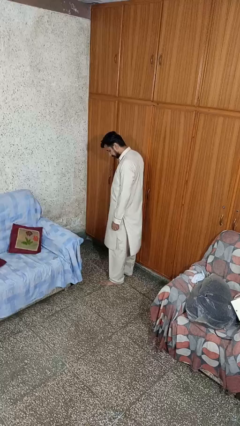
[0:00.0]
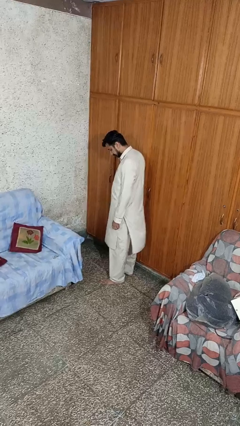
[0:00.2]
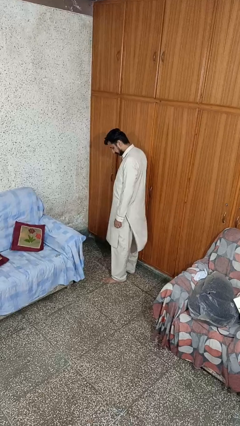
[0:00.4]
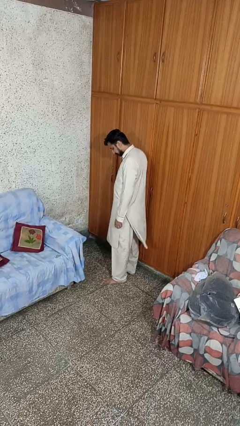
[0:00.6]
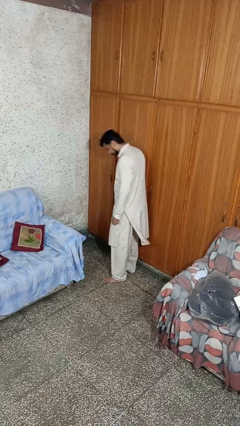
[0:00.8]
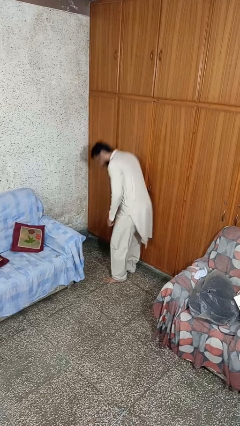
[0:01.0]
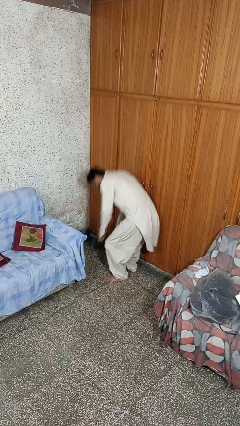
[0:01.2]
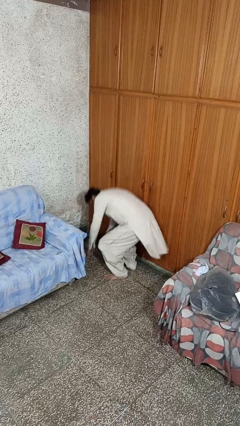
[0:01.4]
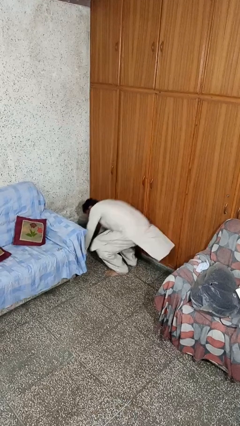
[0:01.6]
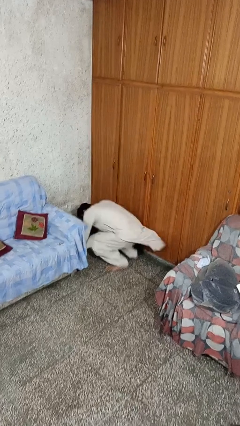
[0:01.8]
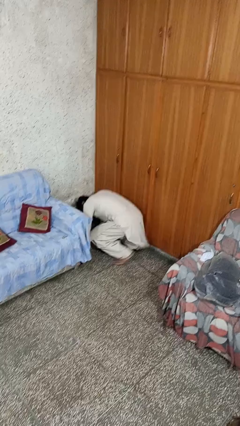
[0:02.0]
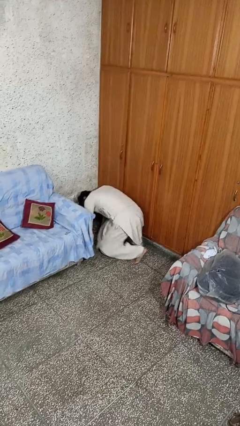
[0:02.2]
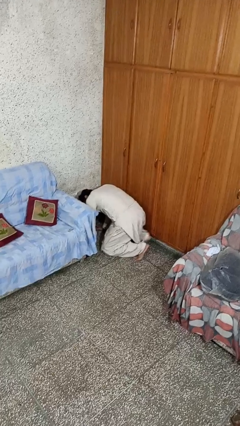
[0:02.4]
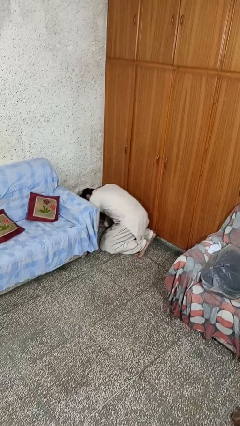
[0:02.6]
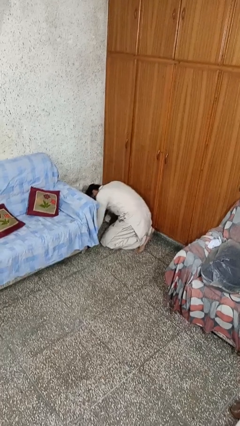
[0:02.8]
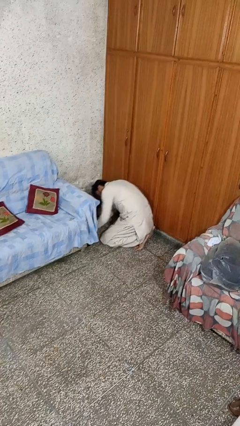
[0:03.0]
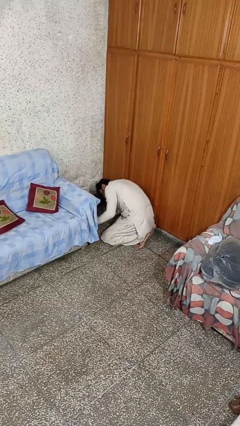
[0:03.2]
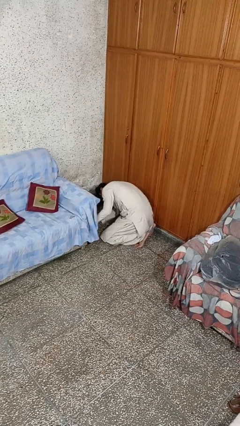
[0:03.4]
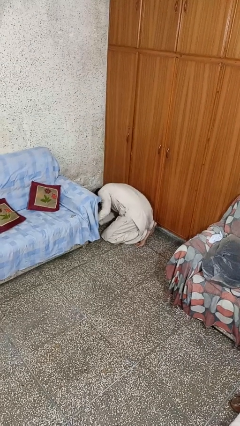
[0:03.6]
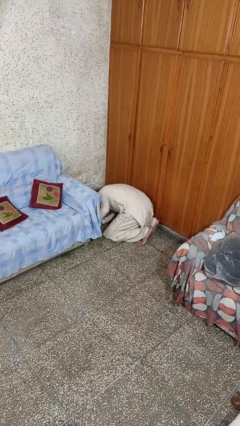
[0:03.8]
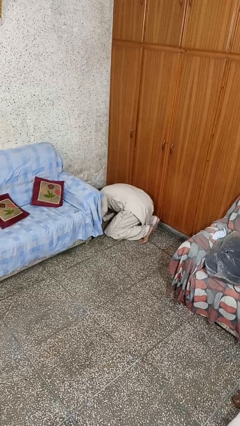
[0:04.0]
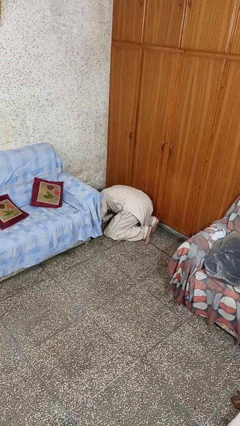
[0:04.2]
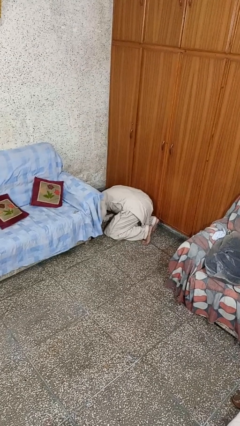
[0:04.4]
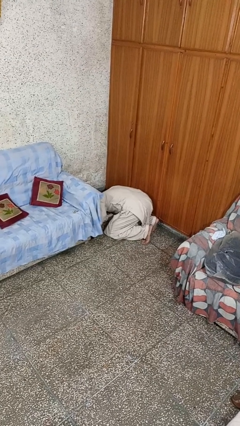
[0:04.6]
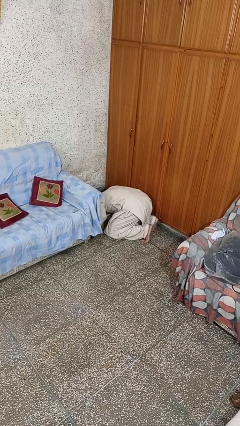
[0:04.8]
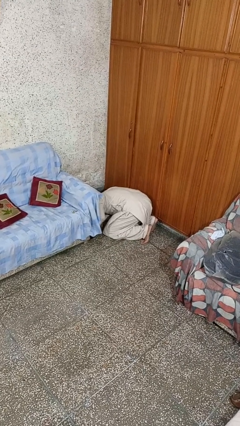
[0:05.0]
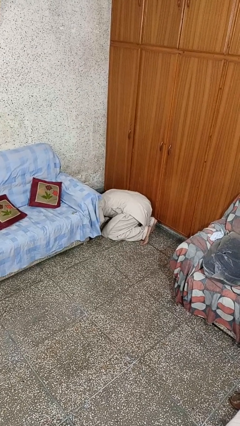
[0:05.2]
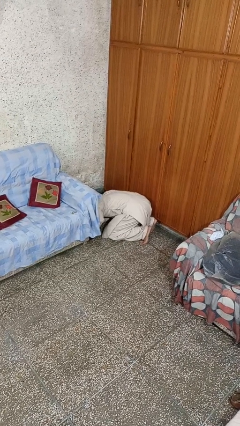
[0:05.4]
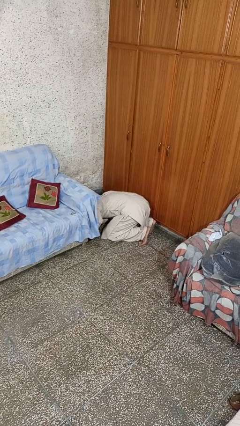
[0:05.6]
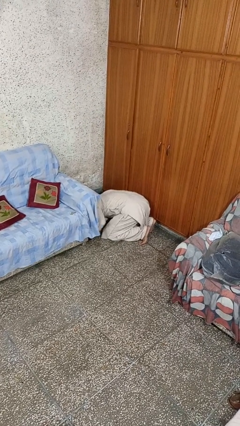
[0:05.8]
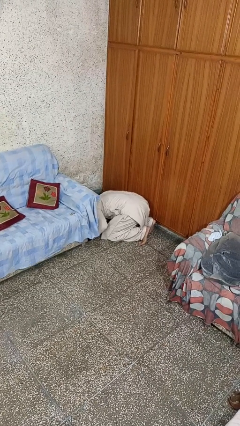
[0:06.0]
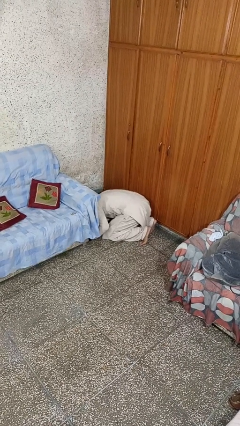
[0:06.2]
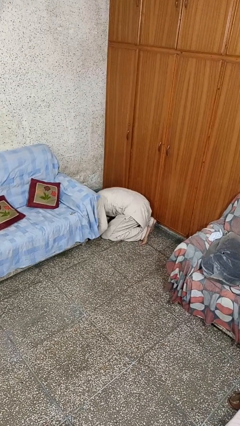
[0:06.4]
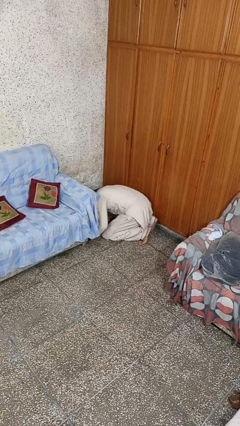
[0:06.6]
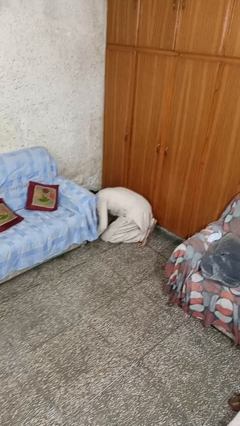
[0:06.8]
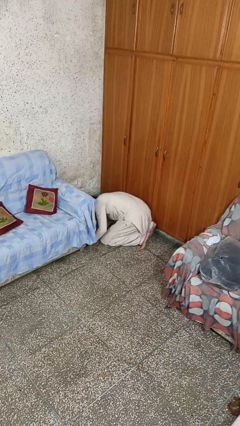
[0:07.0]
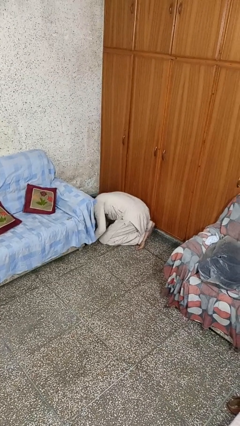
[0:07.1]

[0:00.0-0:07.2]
person searches under couch

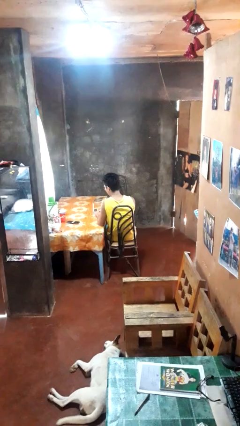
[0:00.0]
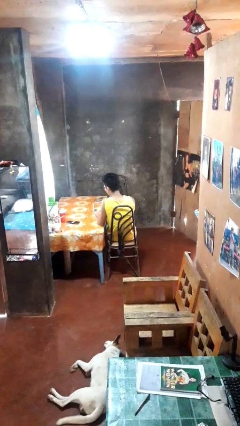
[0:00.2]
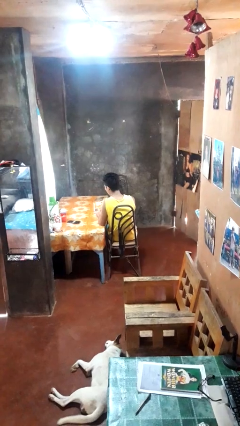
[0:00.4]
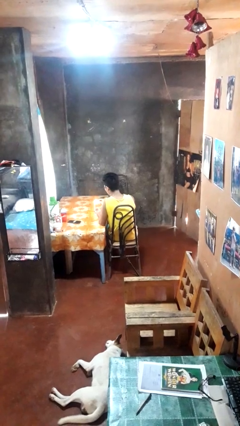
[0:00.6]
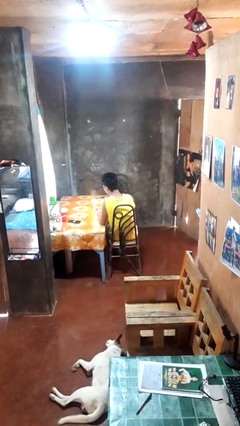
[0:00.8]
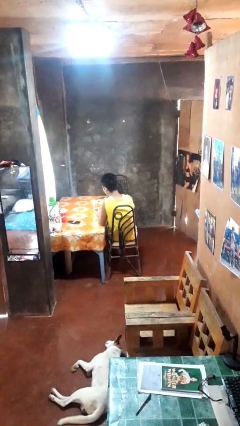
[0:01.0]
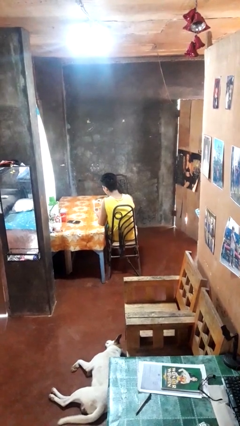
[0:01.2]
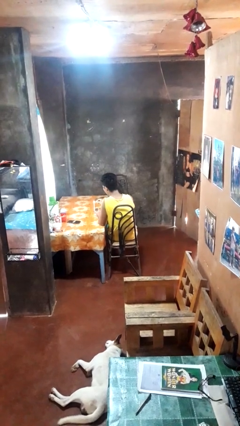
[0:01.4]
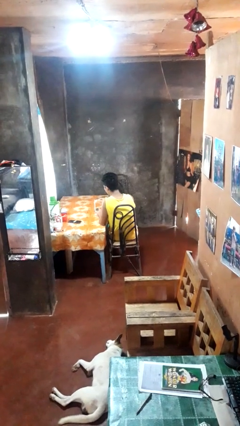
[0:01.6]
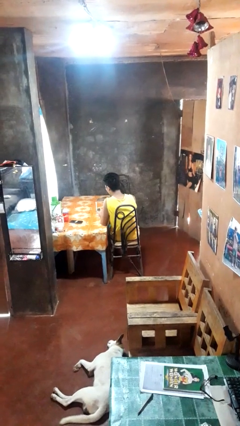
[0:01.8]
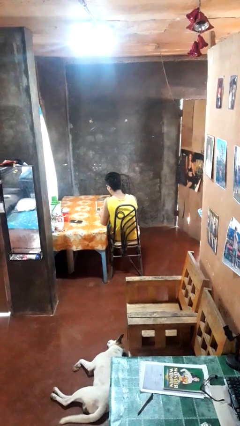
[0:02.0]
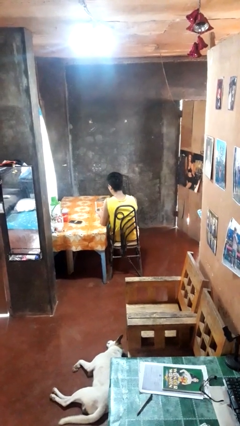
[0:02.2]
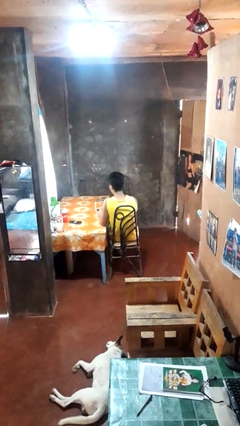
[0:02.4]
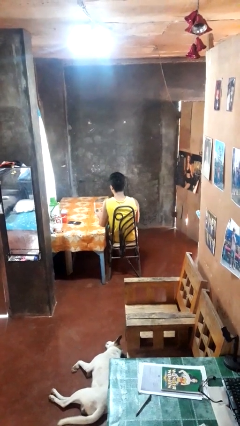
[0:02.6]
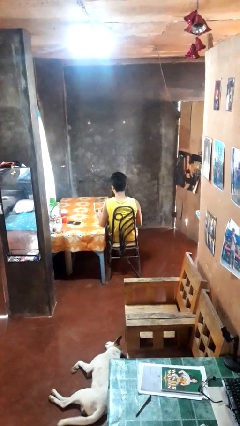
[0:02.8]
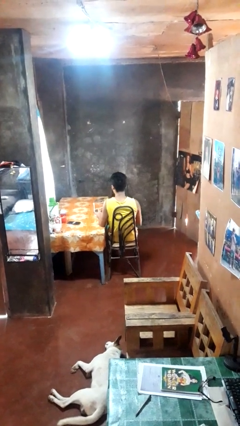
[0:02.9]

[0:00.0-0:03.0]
person lights candle

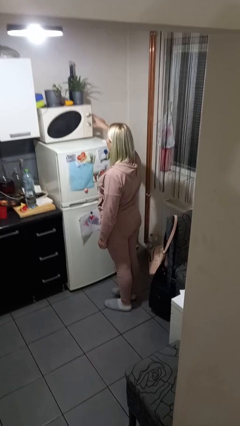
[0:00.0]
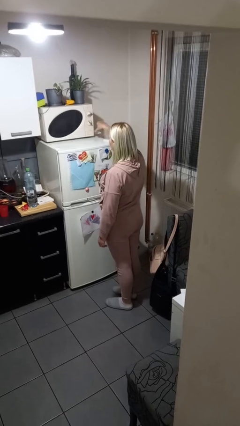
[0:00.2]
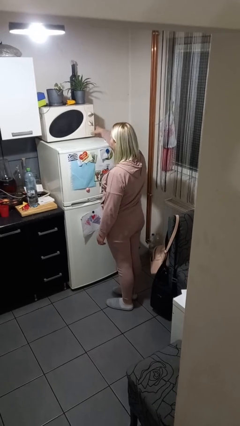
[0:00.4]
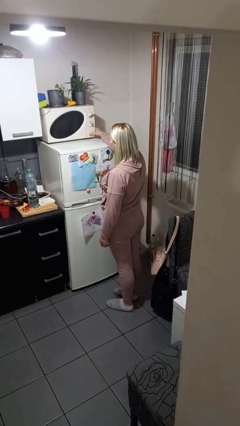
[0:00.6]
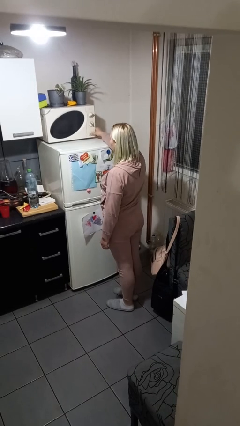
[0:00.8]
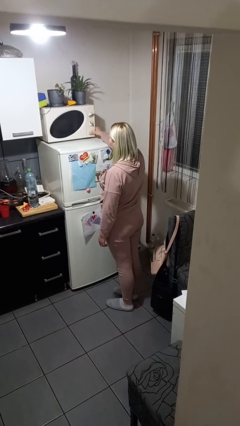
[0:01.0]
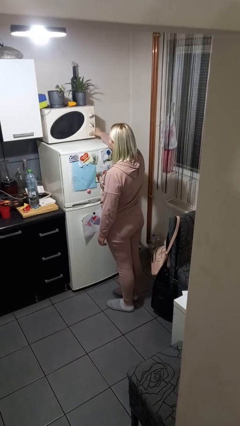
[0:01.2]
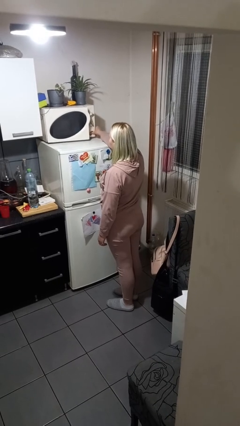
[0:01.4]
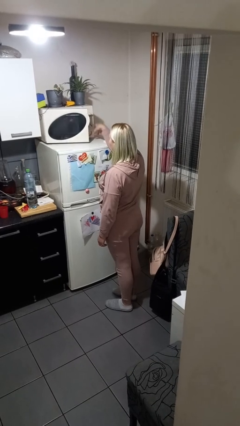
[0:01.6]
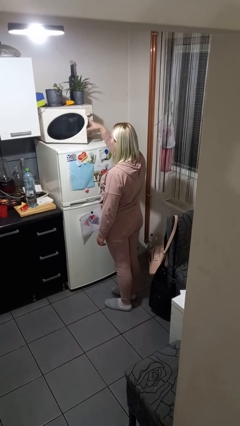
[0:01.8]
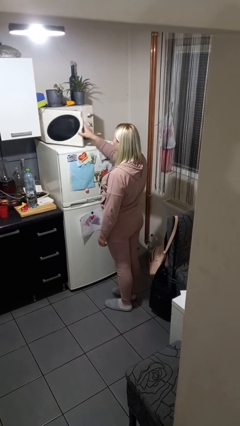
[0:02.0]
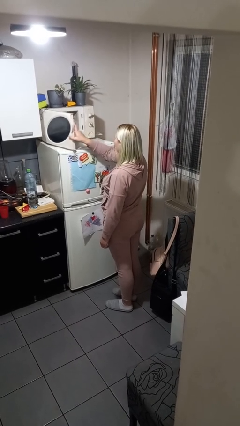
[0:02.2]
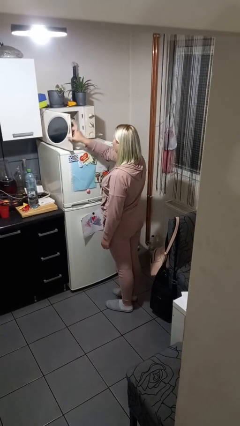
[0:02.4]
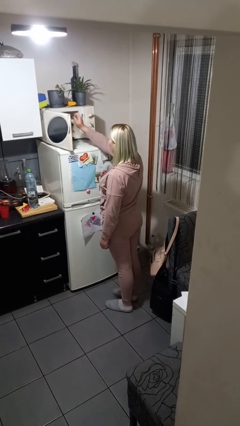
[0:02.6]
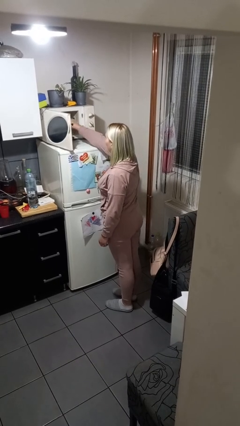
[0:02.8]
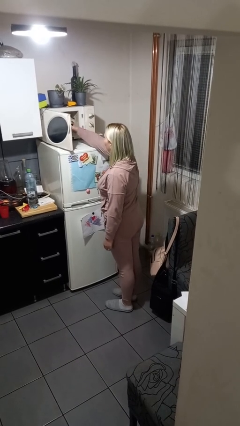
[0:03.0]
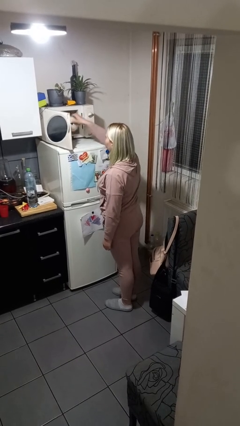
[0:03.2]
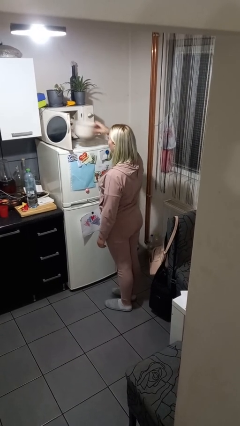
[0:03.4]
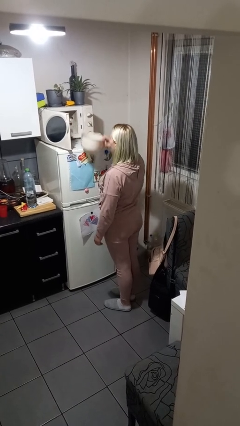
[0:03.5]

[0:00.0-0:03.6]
person takes object from microwave

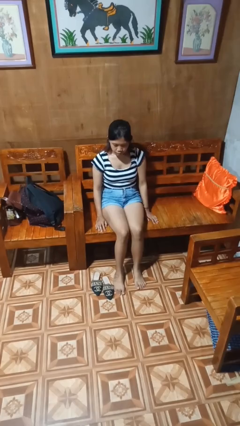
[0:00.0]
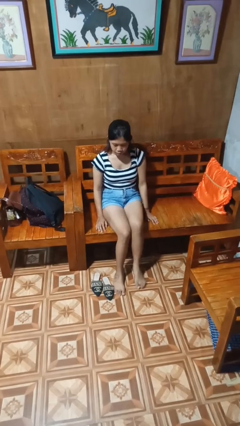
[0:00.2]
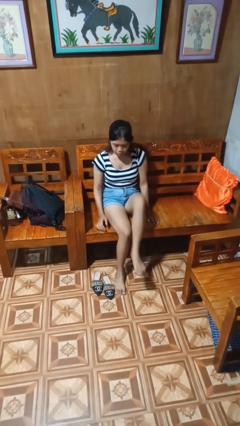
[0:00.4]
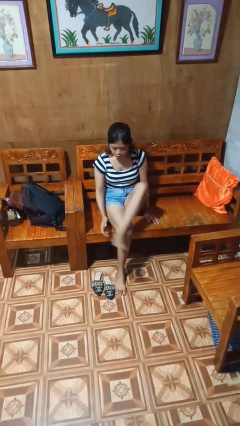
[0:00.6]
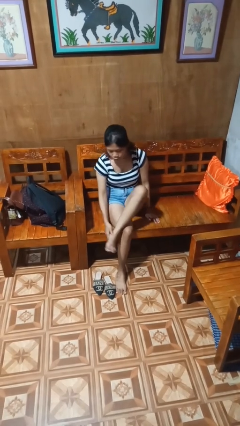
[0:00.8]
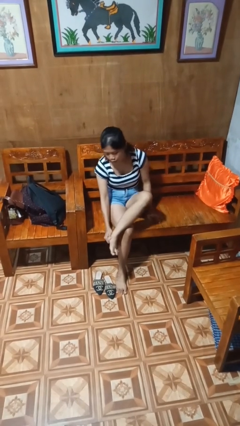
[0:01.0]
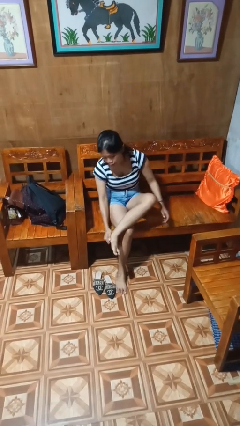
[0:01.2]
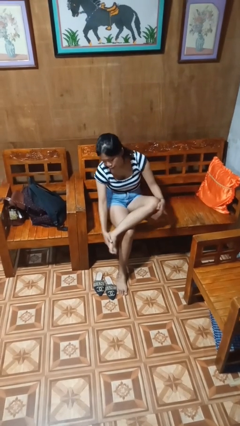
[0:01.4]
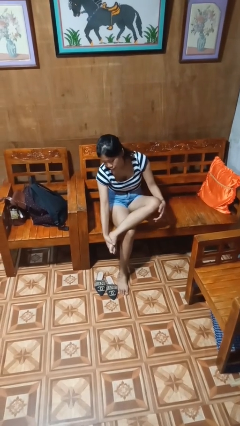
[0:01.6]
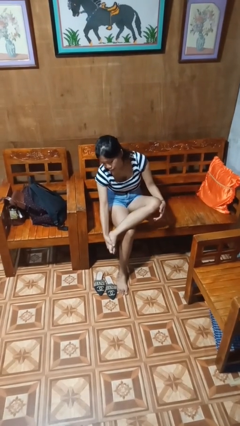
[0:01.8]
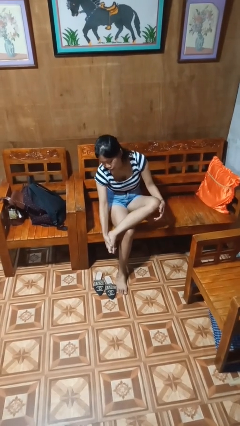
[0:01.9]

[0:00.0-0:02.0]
person rubs foot

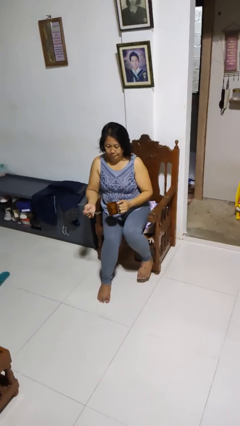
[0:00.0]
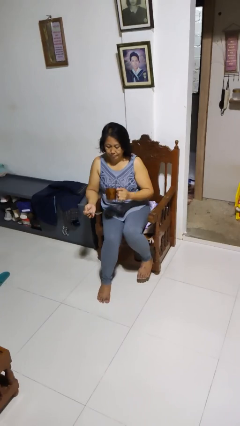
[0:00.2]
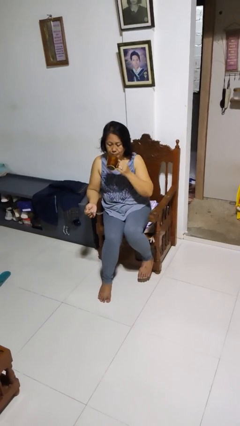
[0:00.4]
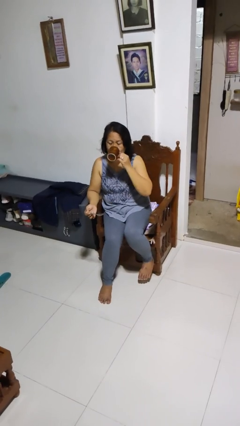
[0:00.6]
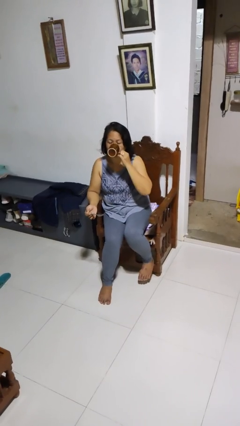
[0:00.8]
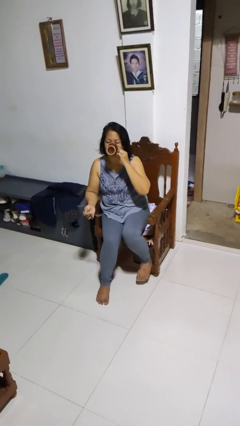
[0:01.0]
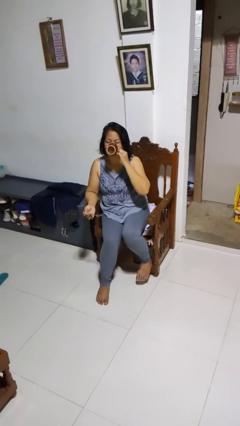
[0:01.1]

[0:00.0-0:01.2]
person drinks from mug

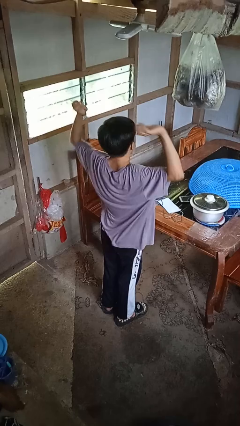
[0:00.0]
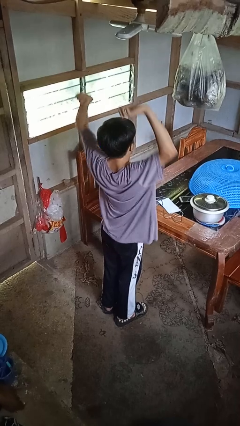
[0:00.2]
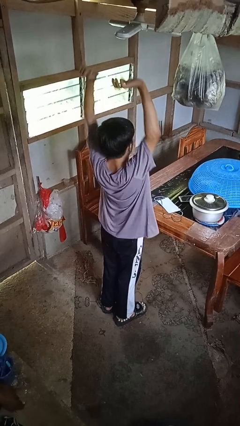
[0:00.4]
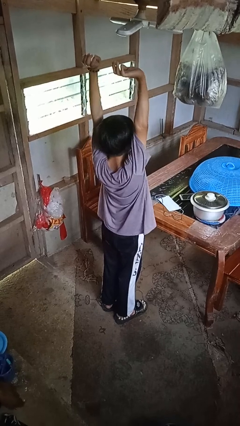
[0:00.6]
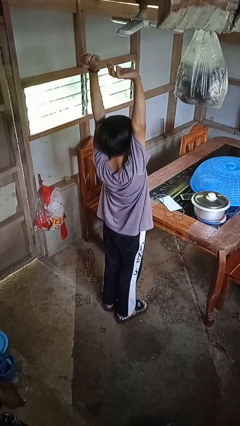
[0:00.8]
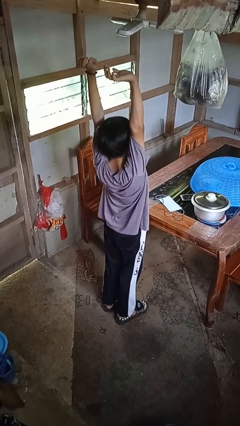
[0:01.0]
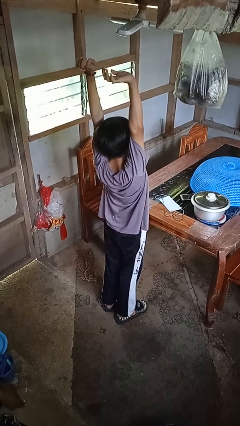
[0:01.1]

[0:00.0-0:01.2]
person stretches arms over head
